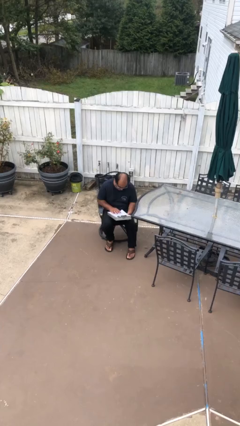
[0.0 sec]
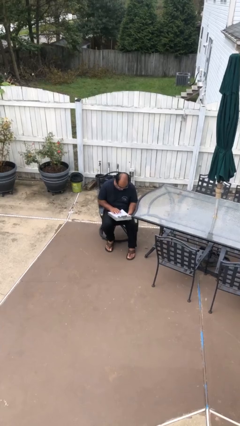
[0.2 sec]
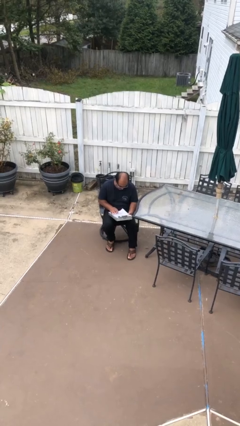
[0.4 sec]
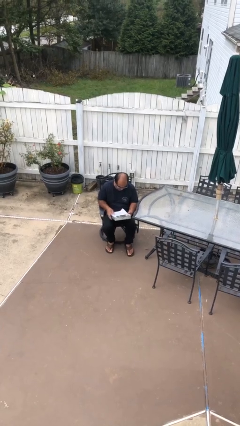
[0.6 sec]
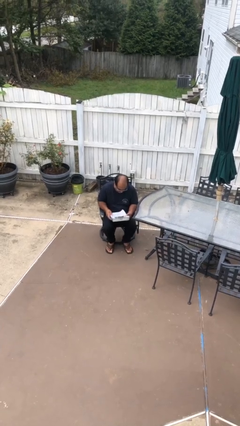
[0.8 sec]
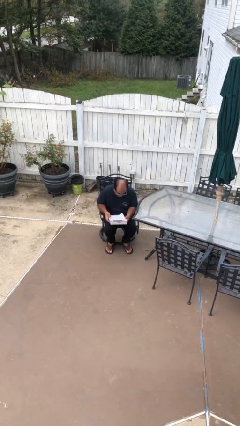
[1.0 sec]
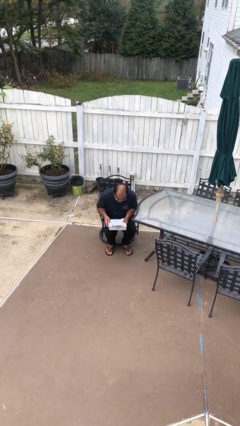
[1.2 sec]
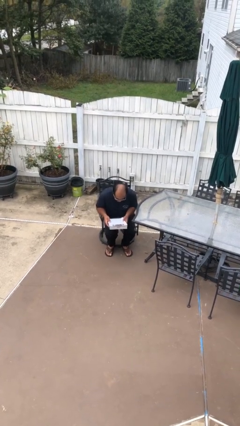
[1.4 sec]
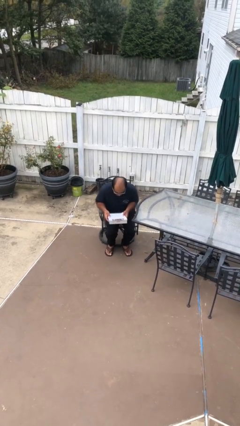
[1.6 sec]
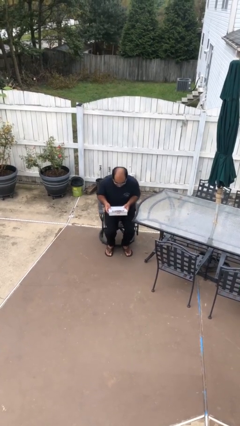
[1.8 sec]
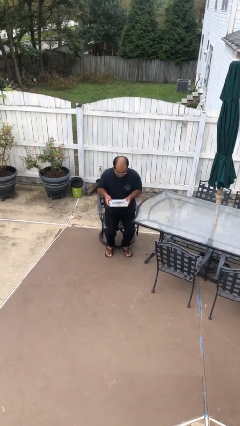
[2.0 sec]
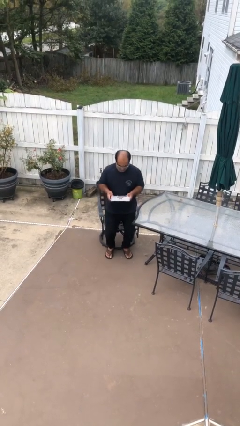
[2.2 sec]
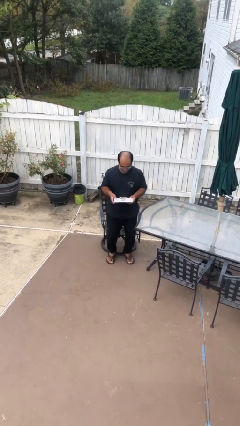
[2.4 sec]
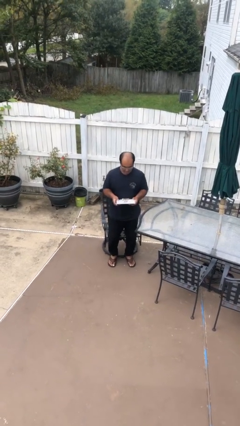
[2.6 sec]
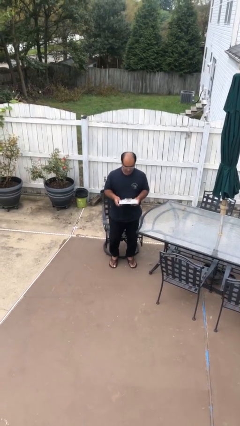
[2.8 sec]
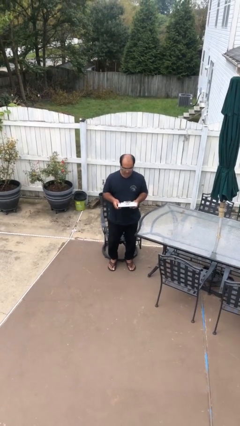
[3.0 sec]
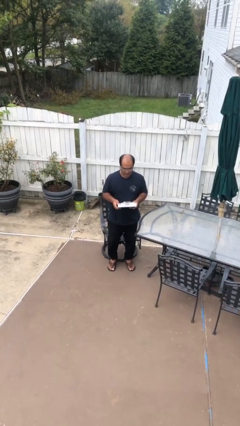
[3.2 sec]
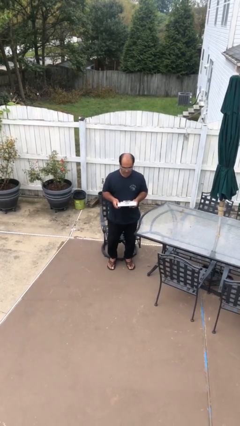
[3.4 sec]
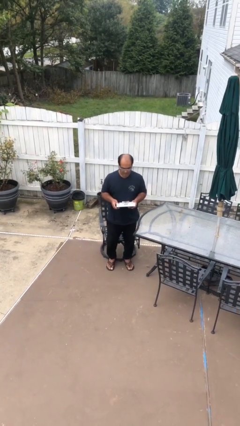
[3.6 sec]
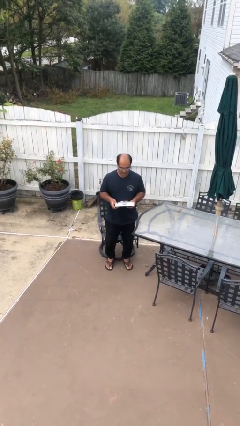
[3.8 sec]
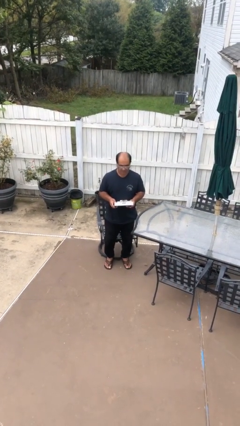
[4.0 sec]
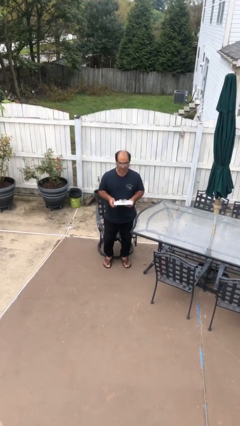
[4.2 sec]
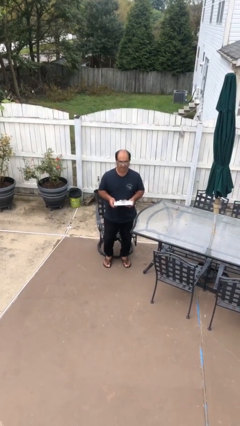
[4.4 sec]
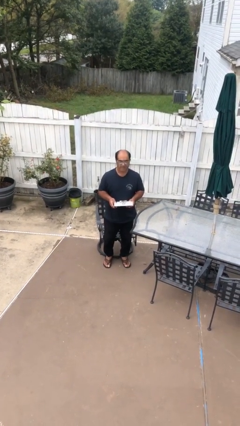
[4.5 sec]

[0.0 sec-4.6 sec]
person stands up

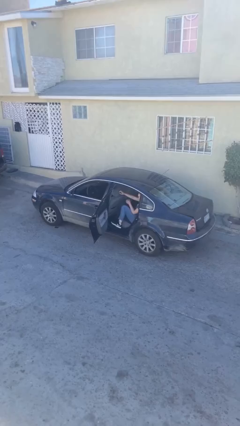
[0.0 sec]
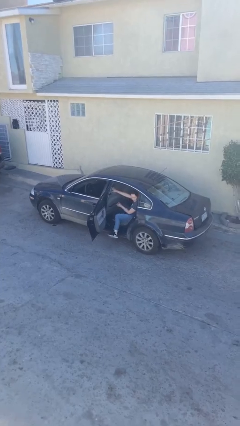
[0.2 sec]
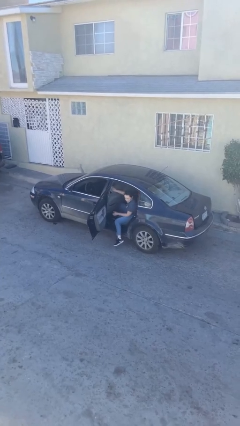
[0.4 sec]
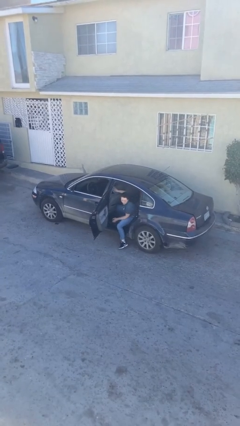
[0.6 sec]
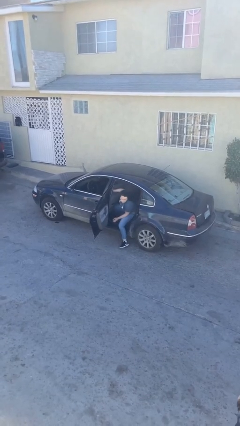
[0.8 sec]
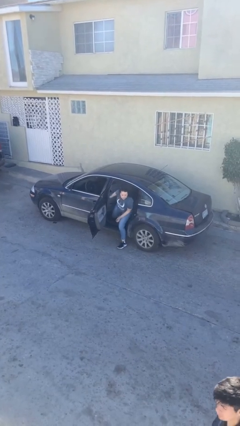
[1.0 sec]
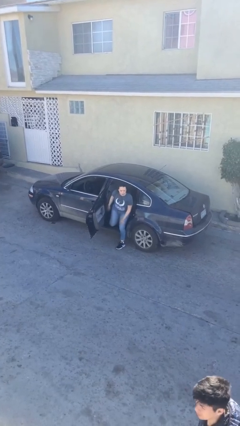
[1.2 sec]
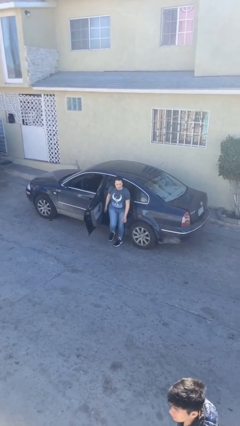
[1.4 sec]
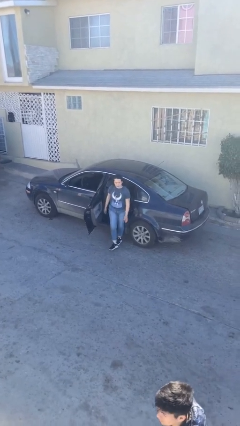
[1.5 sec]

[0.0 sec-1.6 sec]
person exits car

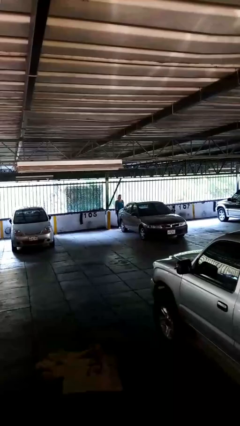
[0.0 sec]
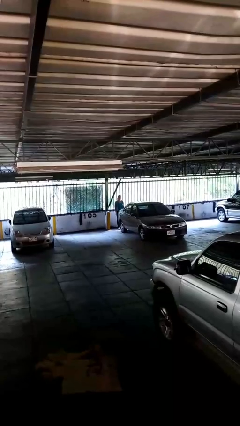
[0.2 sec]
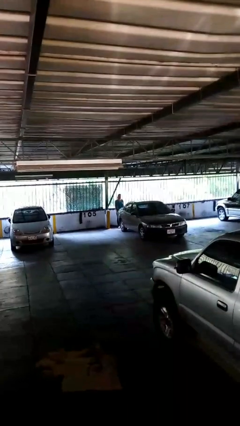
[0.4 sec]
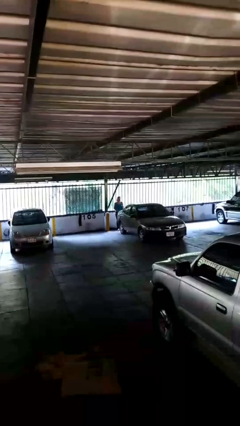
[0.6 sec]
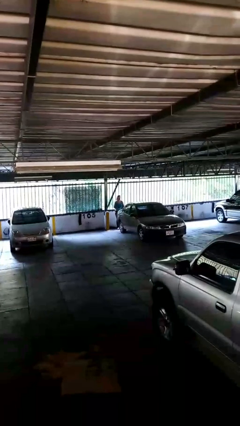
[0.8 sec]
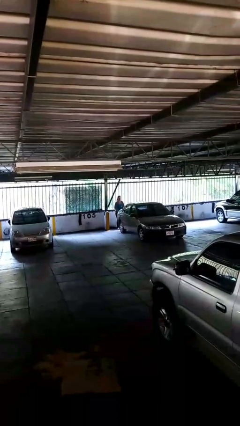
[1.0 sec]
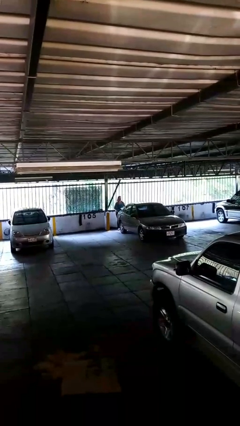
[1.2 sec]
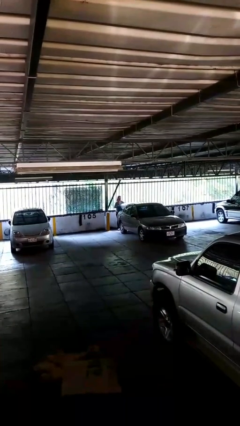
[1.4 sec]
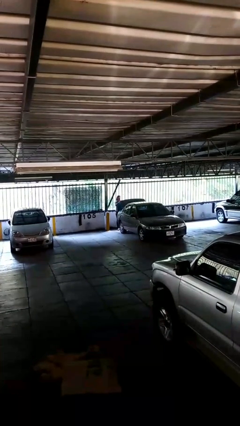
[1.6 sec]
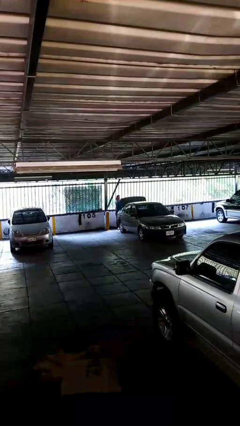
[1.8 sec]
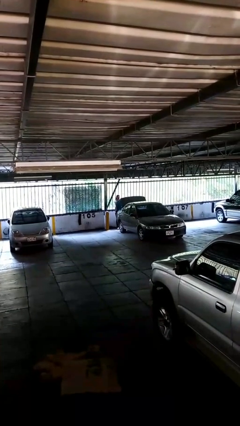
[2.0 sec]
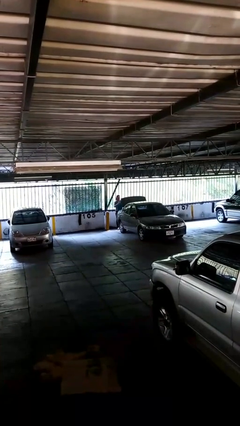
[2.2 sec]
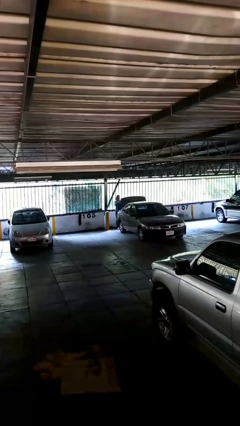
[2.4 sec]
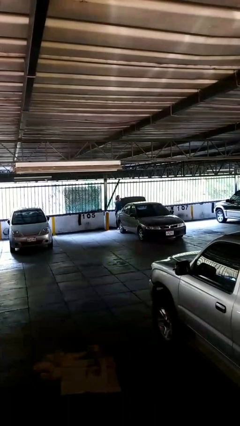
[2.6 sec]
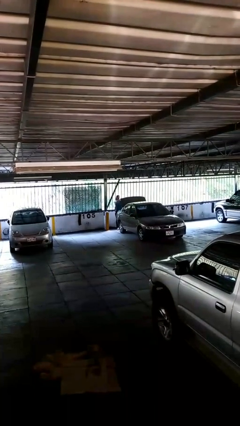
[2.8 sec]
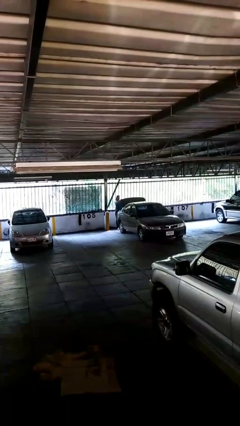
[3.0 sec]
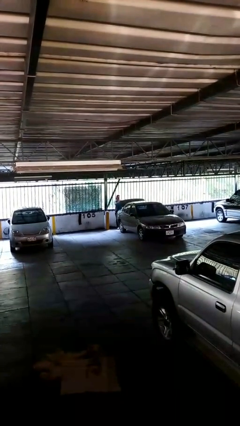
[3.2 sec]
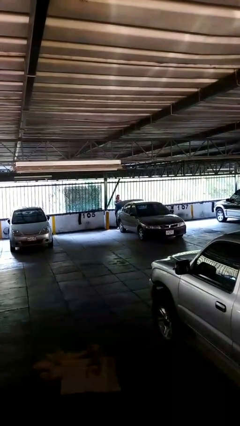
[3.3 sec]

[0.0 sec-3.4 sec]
person opens car trunk

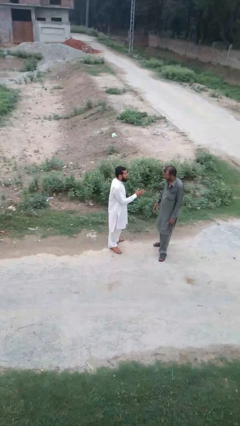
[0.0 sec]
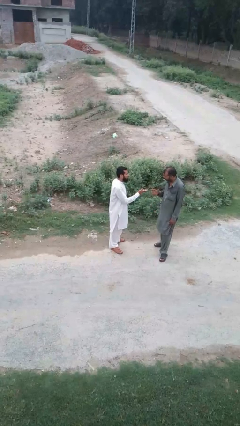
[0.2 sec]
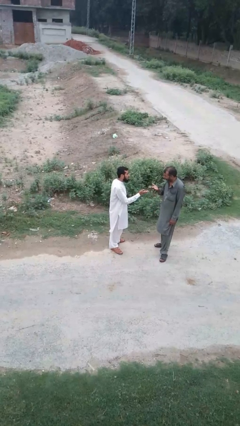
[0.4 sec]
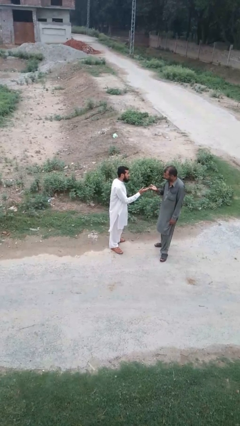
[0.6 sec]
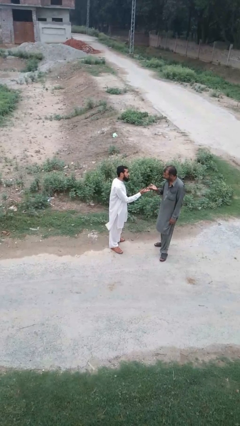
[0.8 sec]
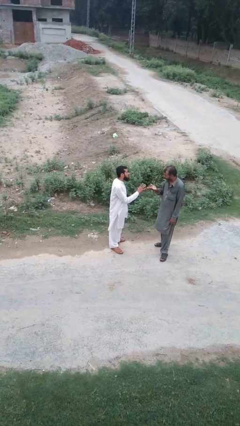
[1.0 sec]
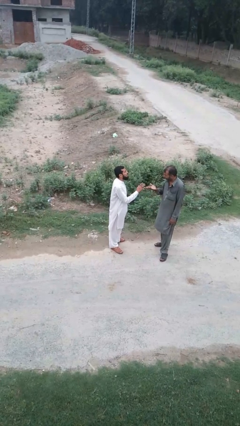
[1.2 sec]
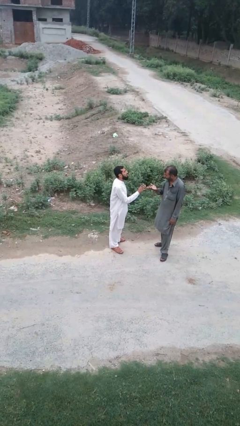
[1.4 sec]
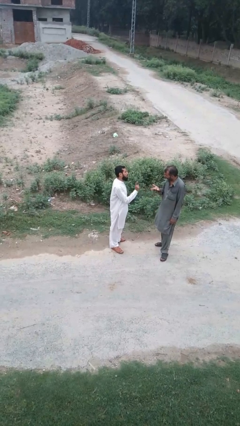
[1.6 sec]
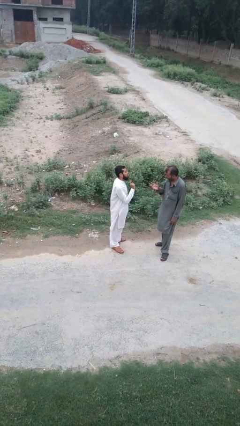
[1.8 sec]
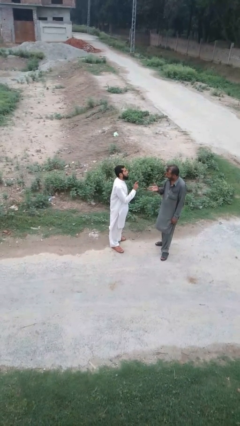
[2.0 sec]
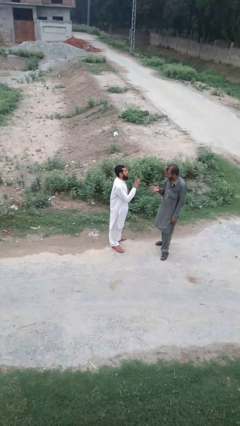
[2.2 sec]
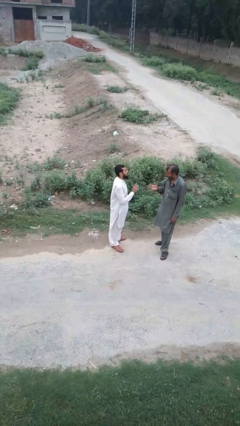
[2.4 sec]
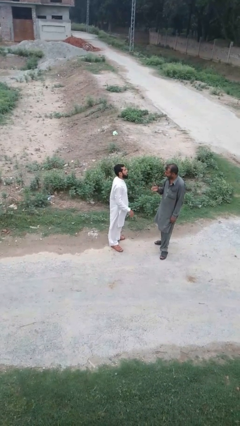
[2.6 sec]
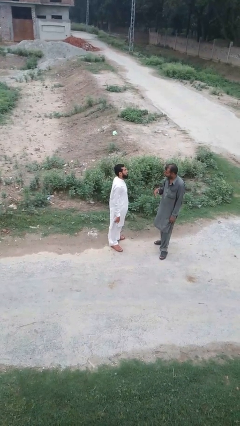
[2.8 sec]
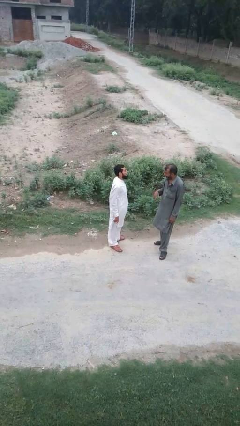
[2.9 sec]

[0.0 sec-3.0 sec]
person talks to person

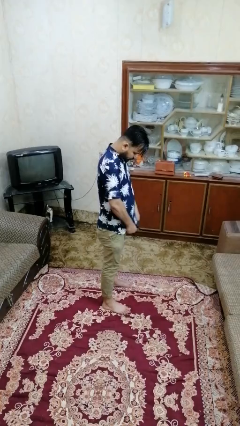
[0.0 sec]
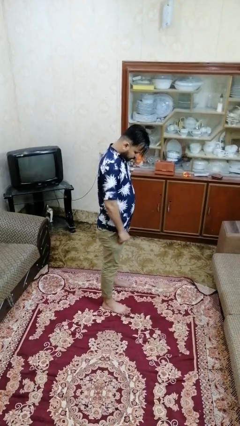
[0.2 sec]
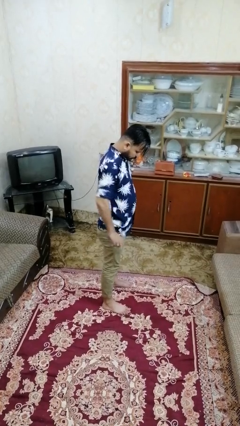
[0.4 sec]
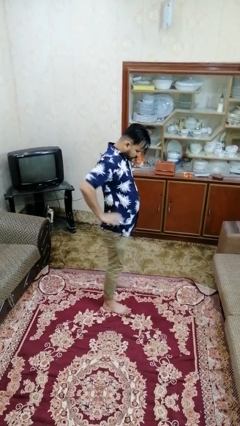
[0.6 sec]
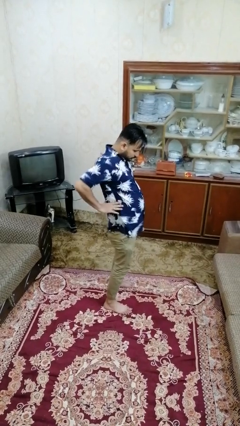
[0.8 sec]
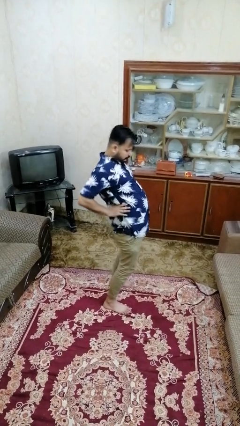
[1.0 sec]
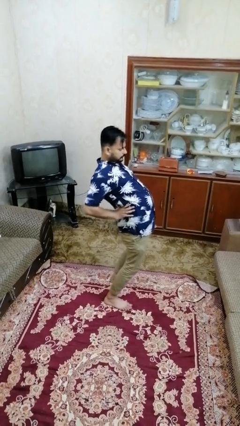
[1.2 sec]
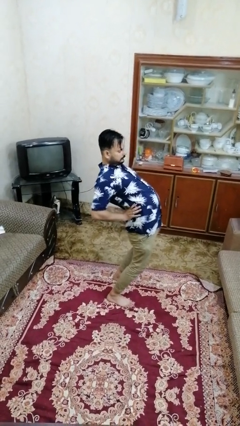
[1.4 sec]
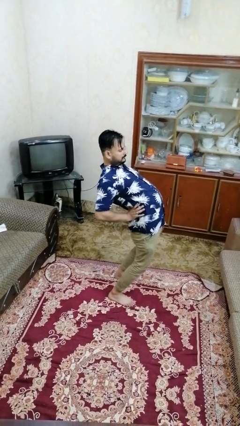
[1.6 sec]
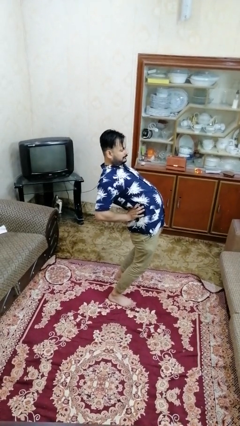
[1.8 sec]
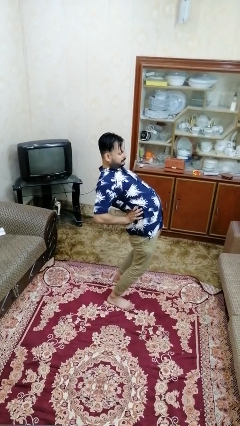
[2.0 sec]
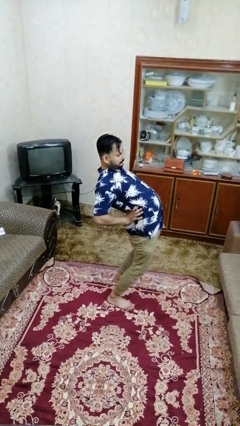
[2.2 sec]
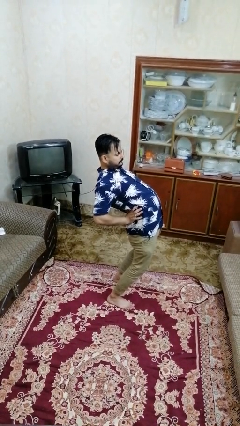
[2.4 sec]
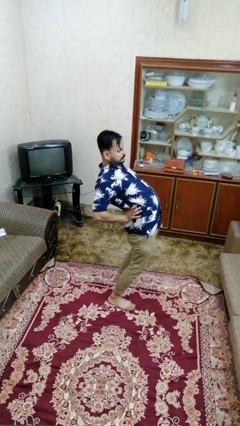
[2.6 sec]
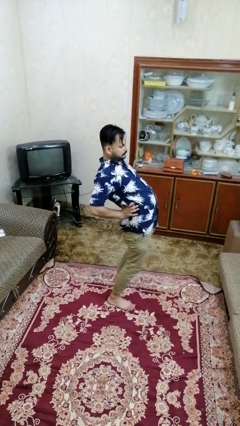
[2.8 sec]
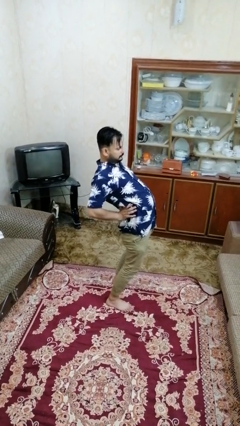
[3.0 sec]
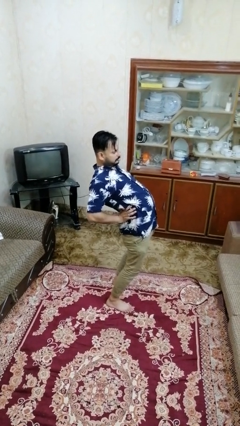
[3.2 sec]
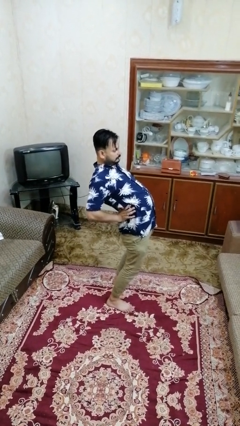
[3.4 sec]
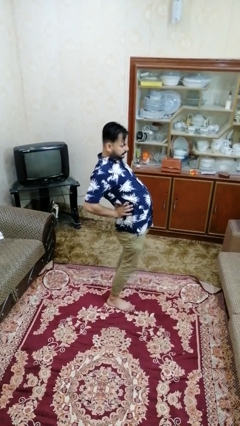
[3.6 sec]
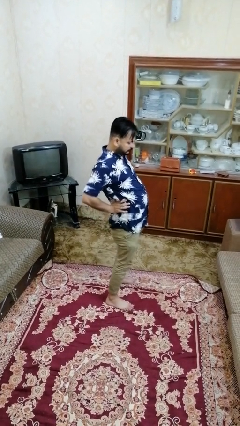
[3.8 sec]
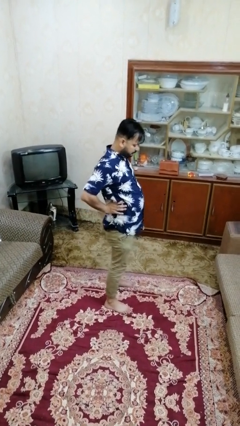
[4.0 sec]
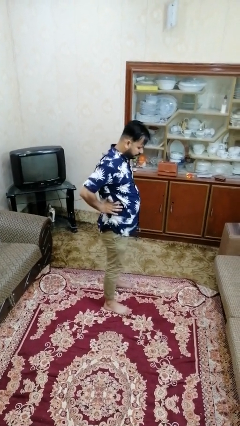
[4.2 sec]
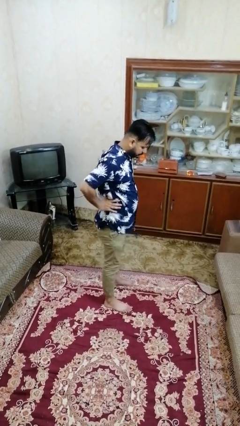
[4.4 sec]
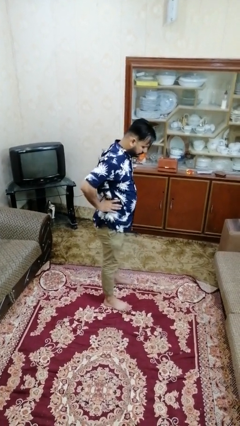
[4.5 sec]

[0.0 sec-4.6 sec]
person stretches back
